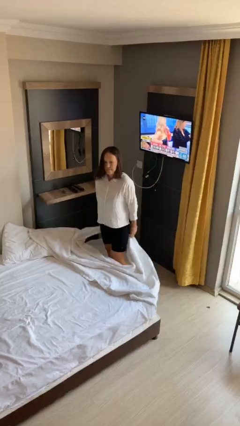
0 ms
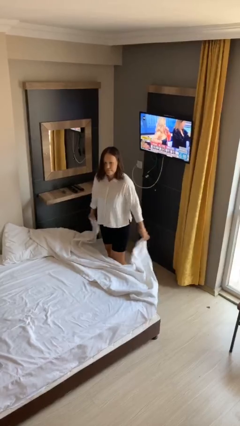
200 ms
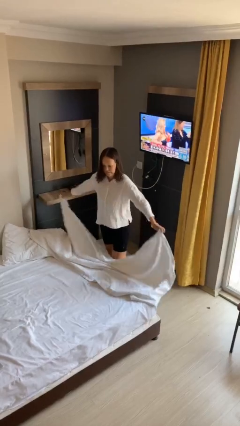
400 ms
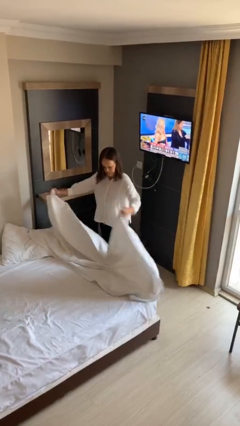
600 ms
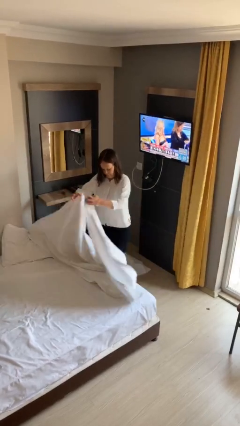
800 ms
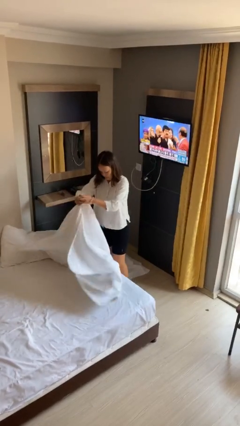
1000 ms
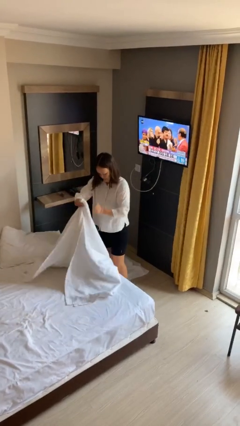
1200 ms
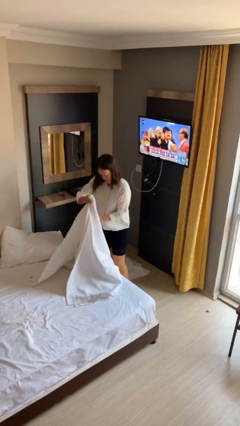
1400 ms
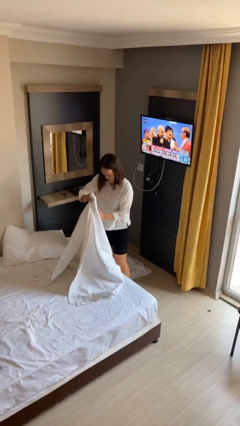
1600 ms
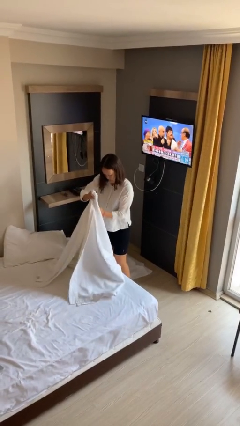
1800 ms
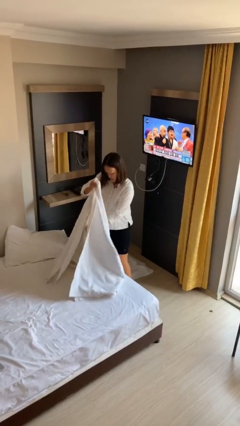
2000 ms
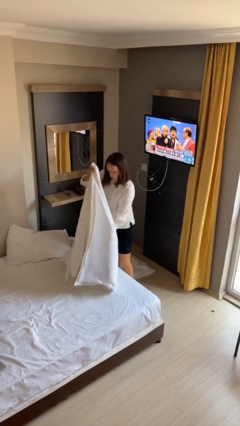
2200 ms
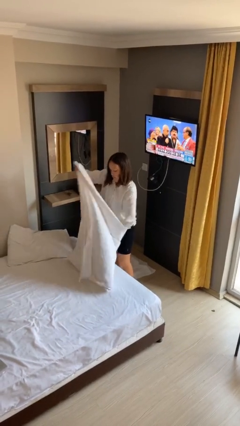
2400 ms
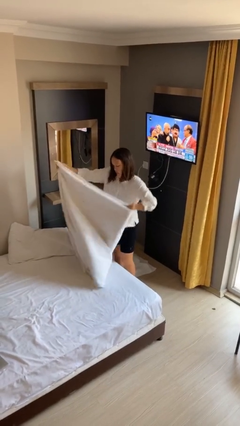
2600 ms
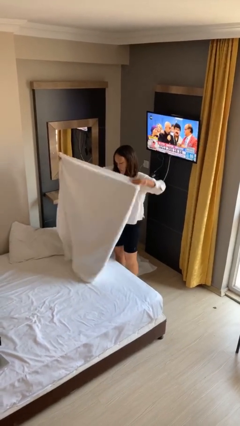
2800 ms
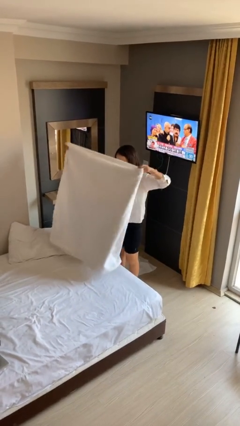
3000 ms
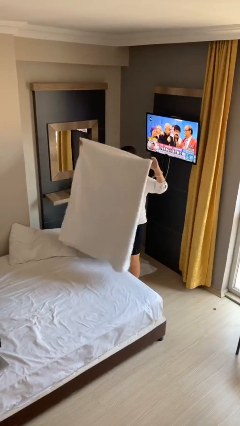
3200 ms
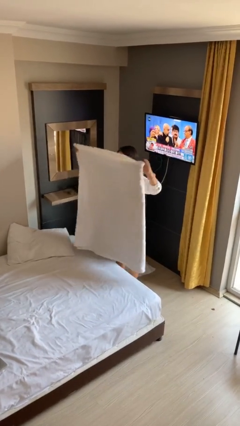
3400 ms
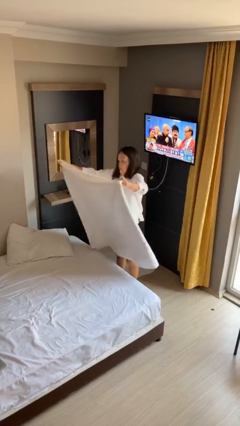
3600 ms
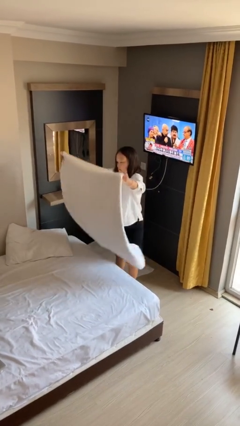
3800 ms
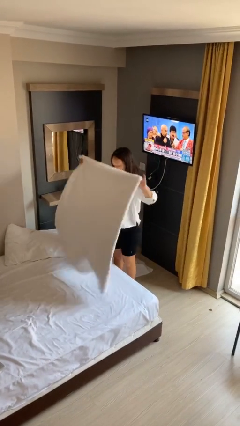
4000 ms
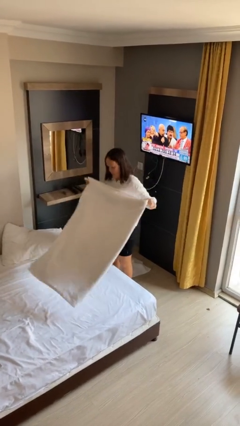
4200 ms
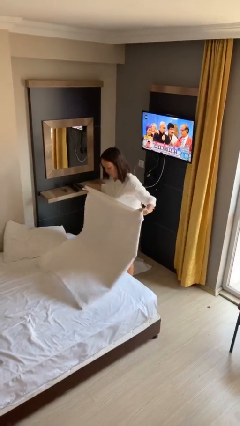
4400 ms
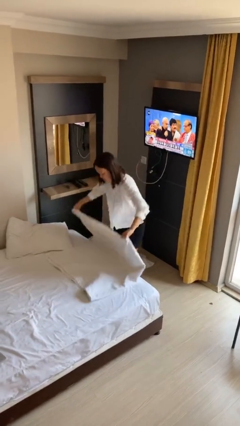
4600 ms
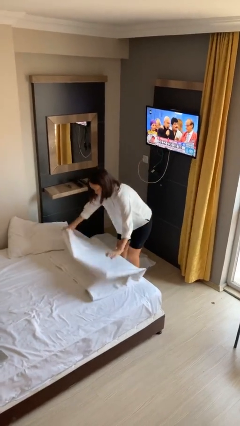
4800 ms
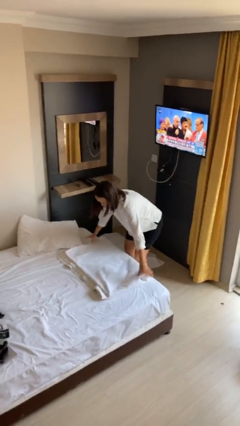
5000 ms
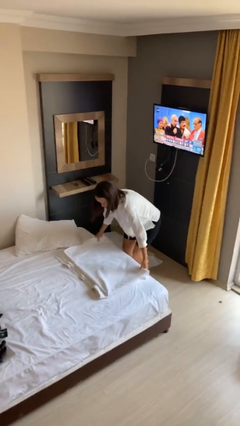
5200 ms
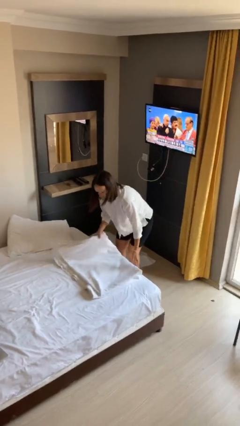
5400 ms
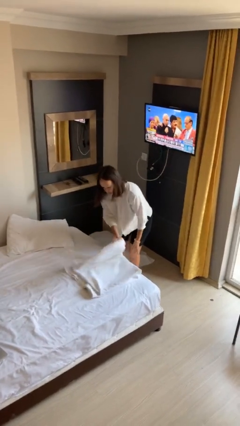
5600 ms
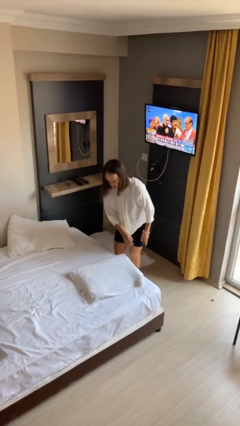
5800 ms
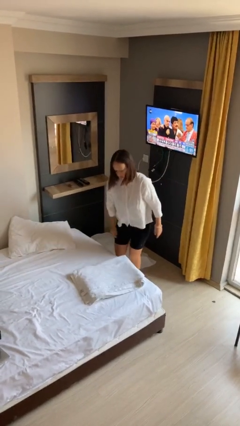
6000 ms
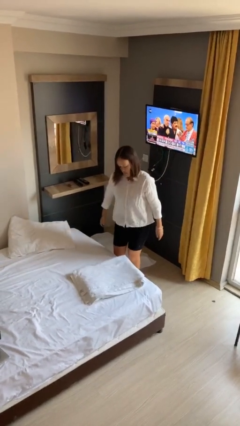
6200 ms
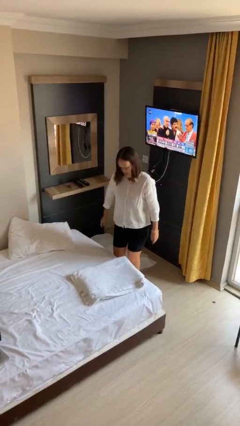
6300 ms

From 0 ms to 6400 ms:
person folds blanket

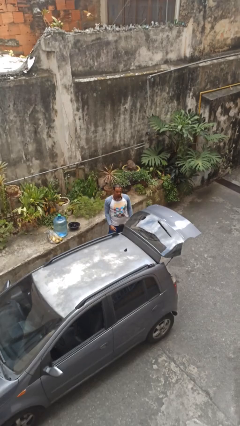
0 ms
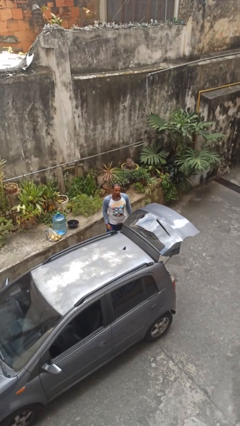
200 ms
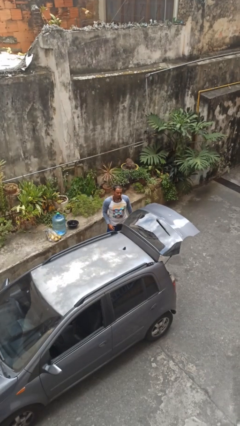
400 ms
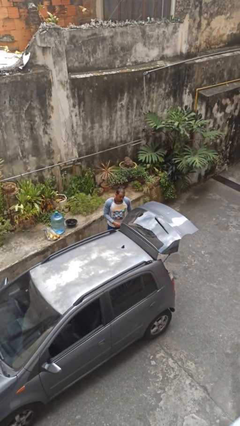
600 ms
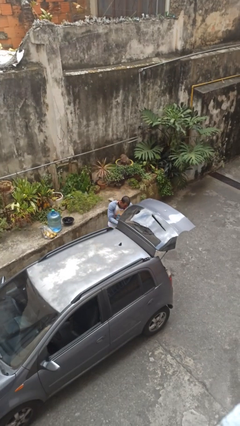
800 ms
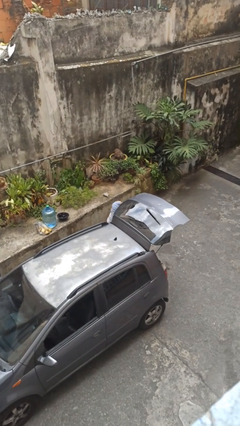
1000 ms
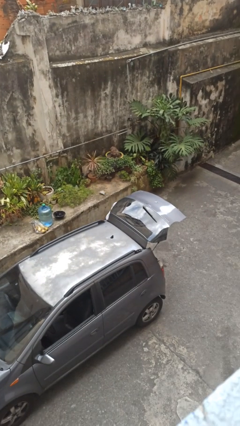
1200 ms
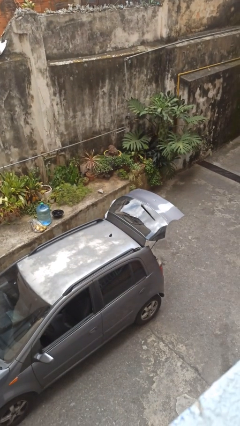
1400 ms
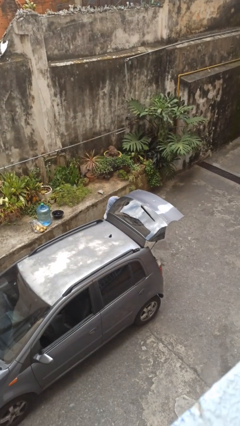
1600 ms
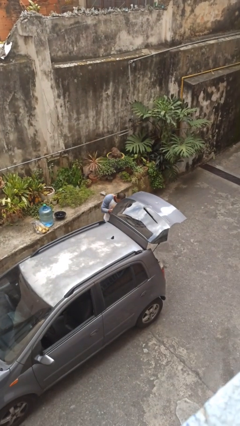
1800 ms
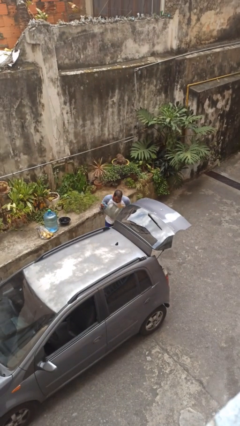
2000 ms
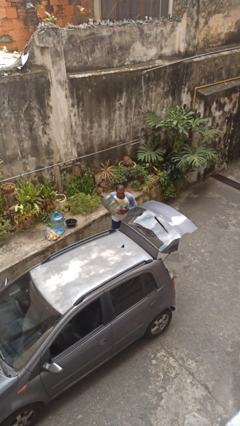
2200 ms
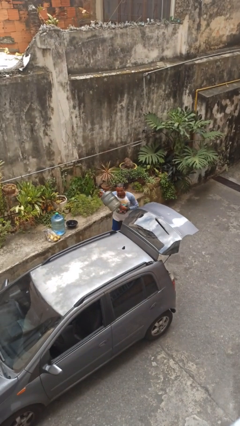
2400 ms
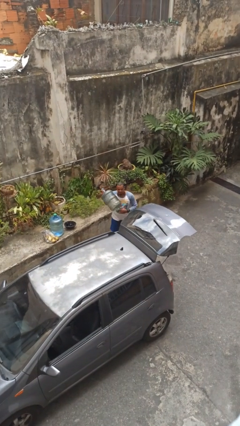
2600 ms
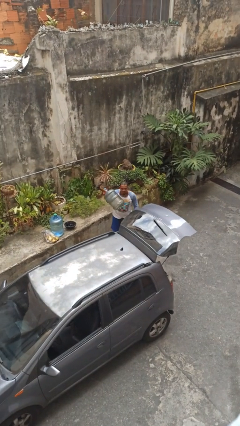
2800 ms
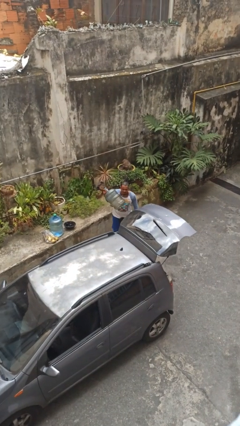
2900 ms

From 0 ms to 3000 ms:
person unloads car

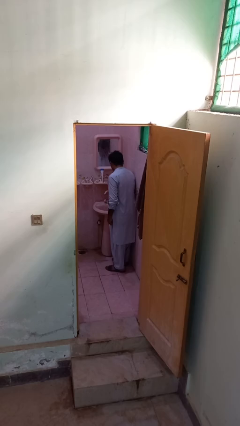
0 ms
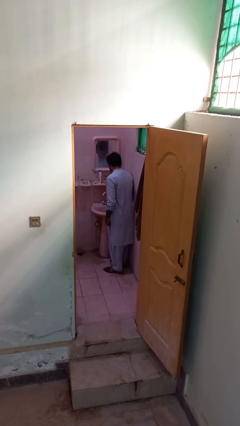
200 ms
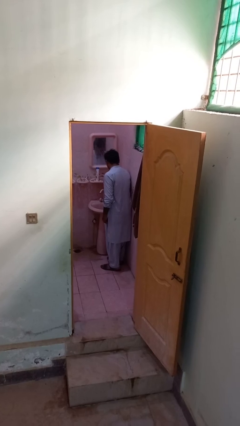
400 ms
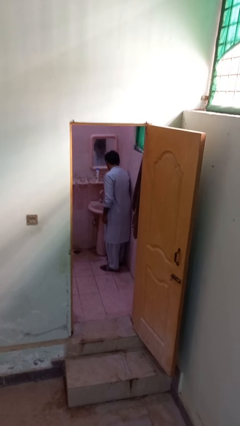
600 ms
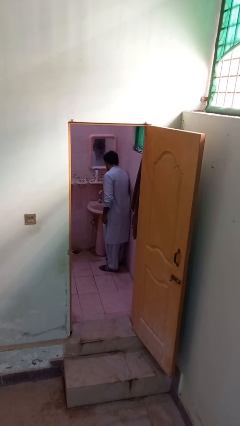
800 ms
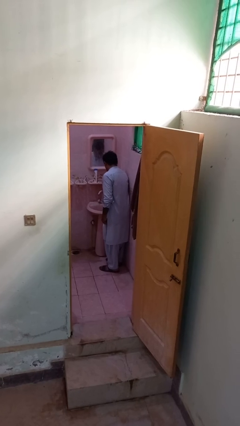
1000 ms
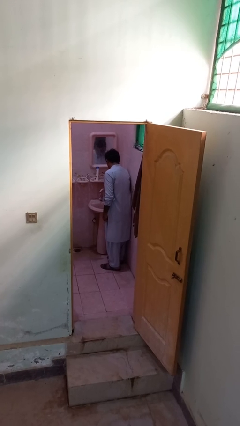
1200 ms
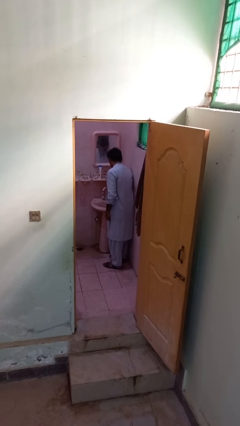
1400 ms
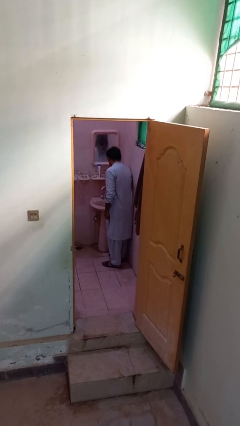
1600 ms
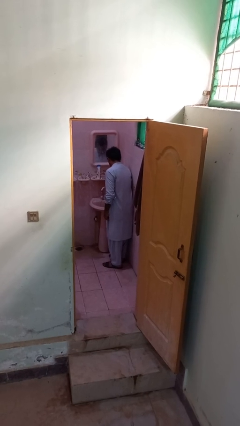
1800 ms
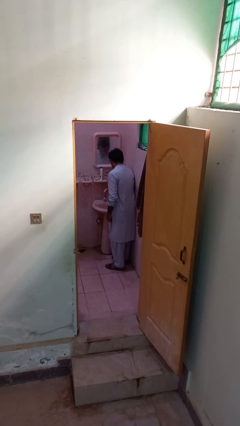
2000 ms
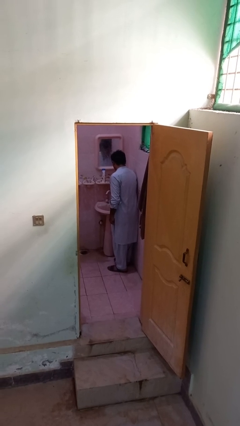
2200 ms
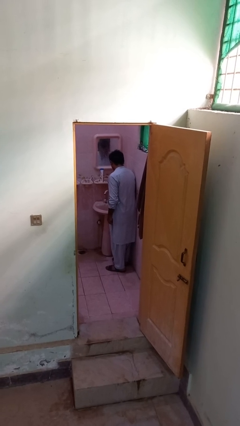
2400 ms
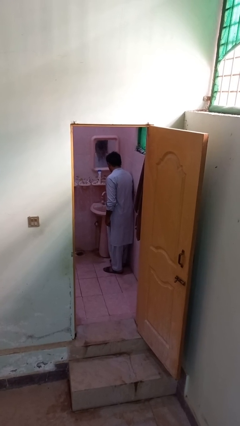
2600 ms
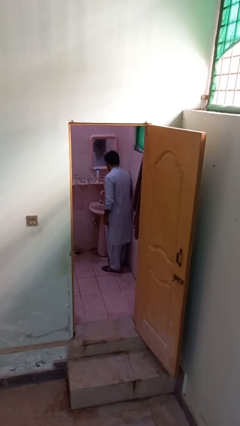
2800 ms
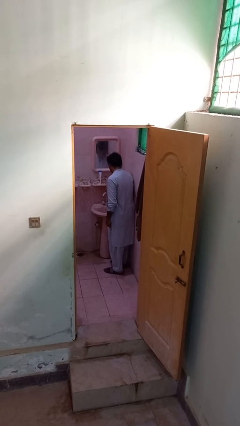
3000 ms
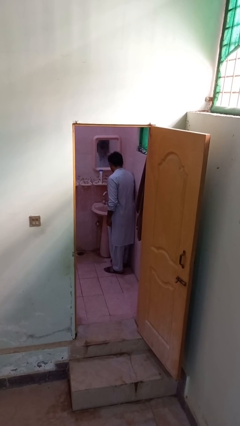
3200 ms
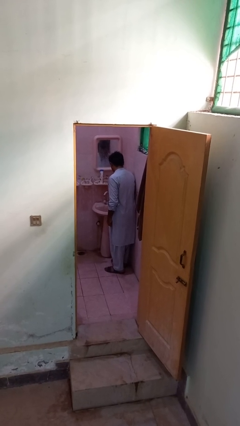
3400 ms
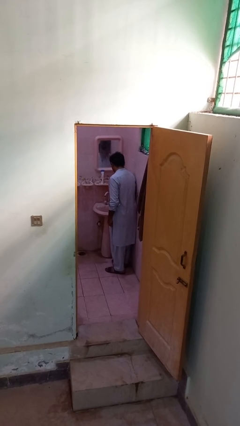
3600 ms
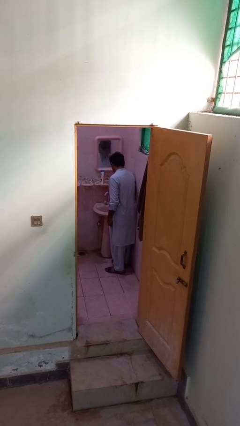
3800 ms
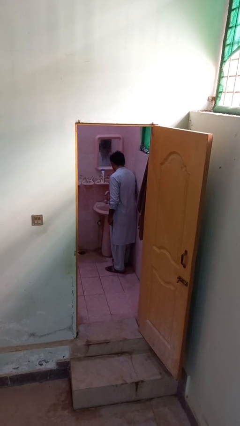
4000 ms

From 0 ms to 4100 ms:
person turns on faucet

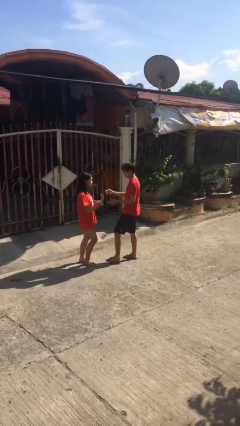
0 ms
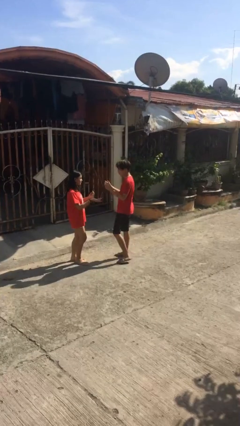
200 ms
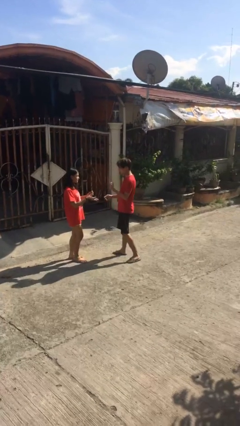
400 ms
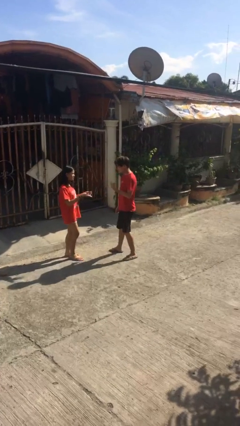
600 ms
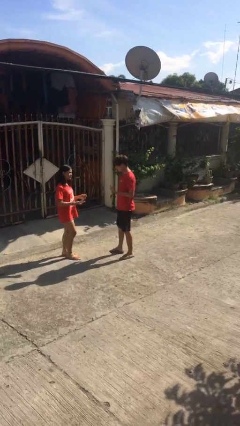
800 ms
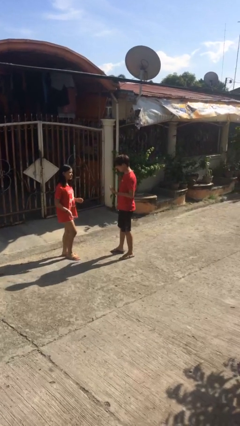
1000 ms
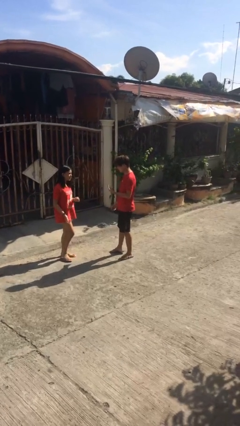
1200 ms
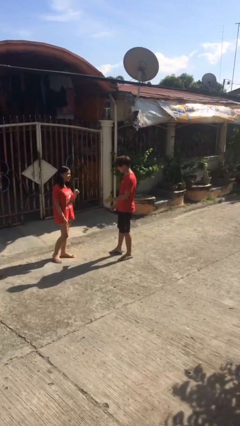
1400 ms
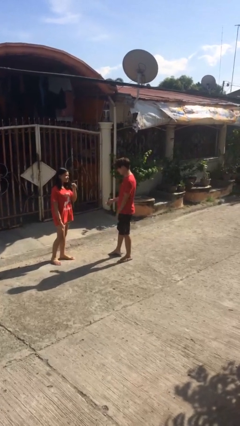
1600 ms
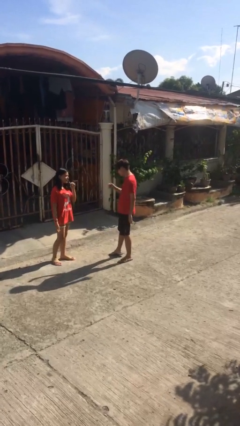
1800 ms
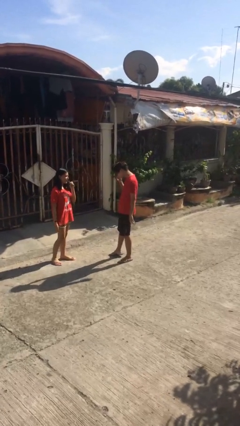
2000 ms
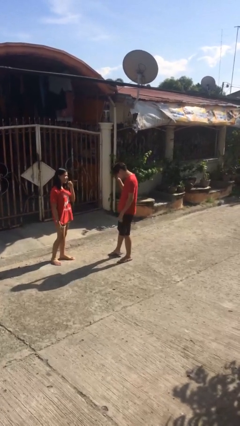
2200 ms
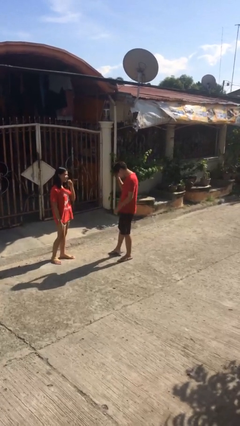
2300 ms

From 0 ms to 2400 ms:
person talks to person

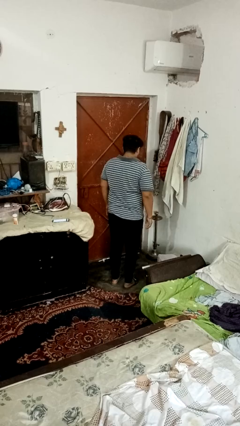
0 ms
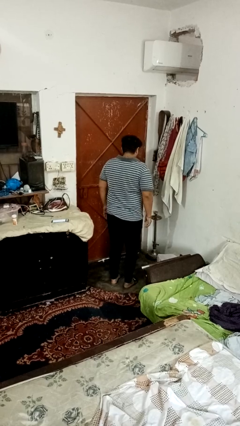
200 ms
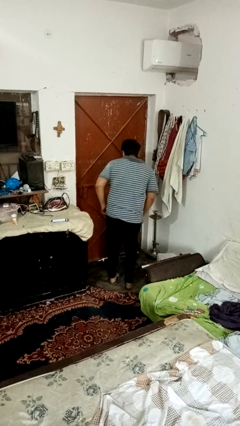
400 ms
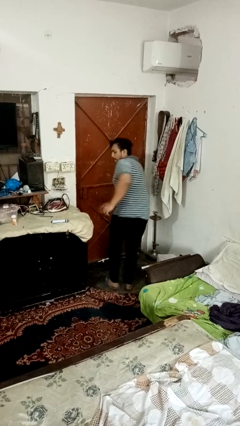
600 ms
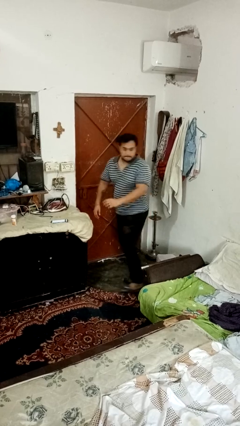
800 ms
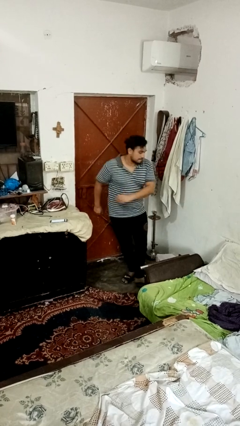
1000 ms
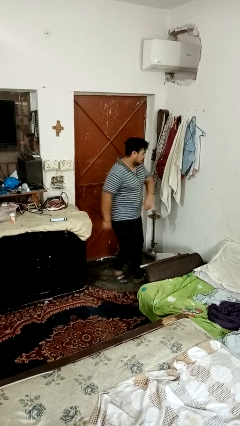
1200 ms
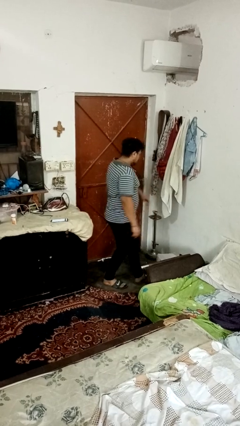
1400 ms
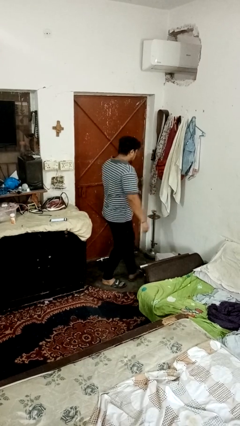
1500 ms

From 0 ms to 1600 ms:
person twirls
